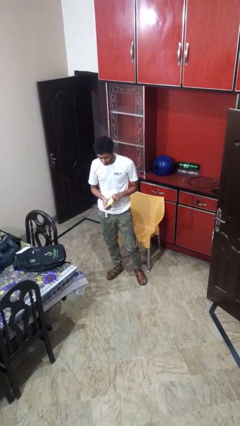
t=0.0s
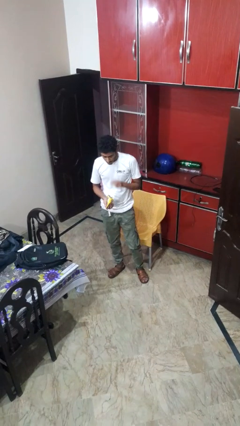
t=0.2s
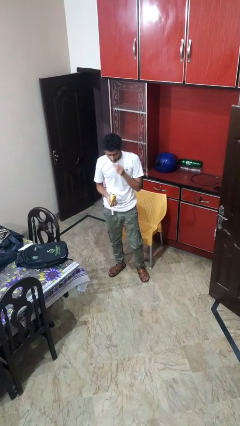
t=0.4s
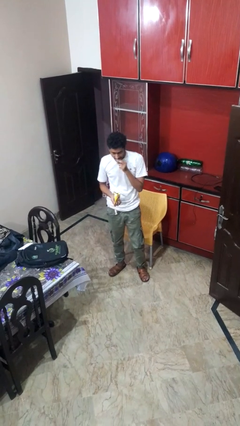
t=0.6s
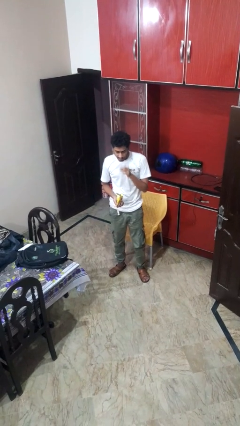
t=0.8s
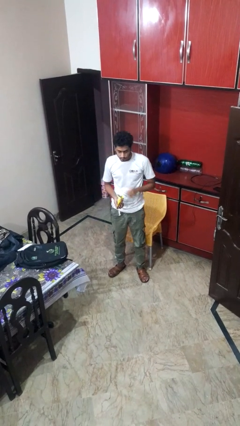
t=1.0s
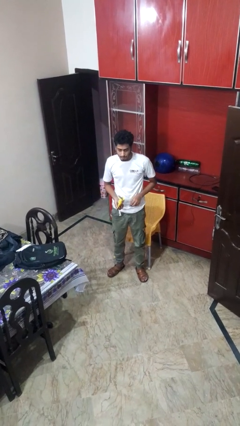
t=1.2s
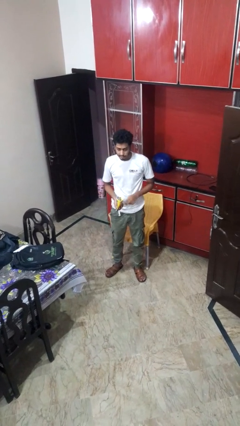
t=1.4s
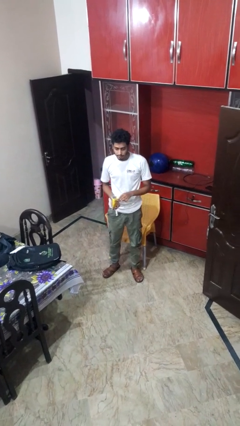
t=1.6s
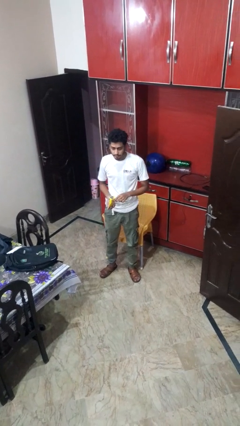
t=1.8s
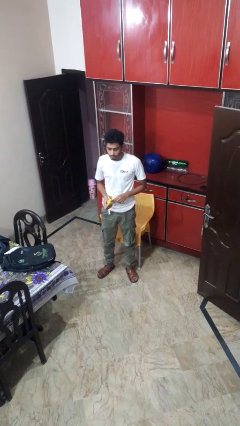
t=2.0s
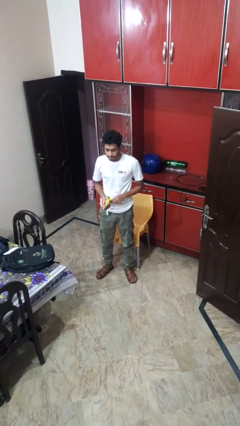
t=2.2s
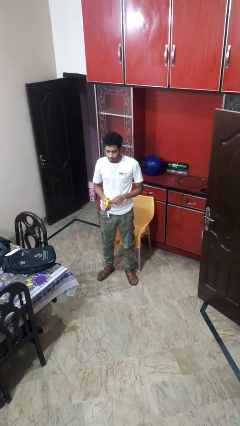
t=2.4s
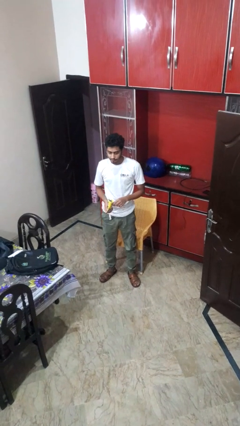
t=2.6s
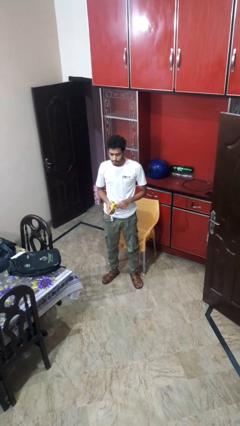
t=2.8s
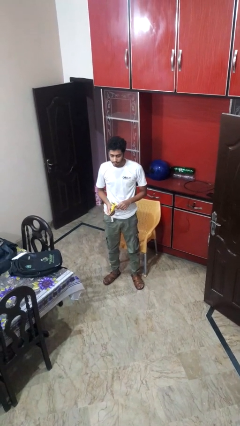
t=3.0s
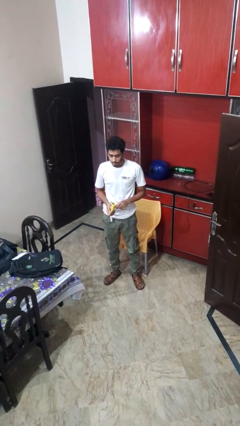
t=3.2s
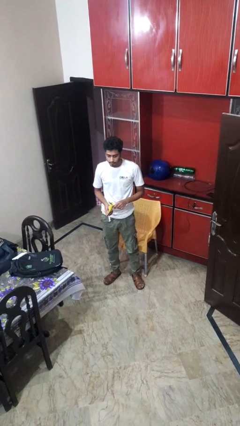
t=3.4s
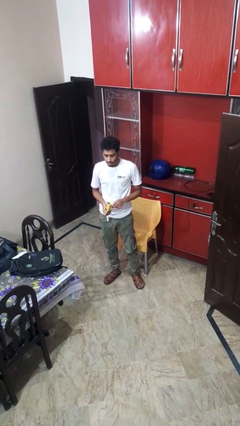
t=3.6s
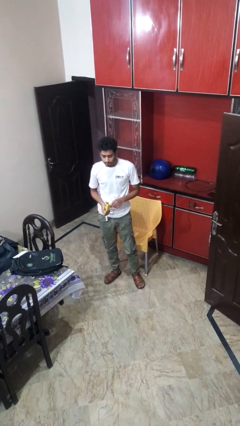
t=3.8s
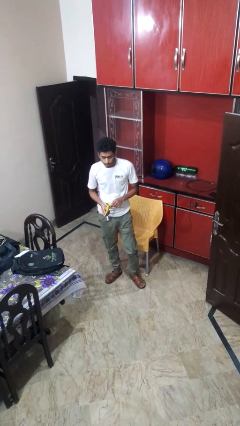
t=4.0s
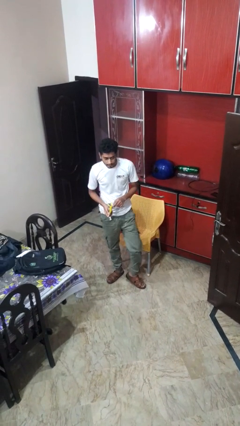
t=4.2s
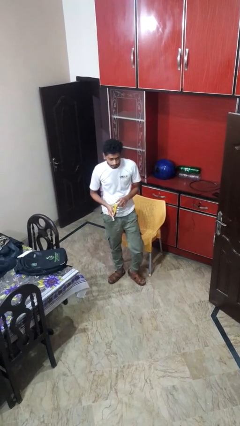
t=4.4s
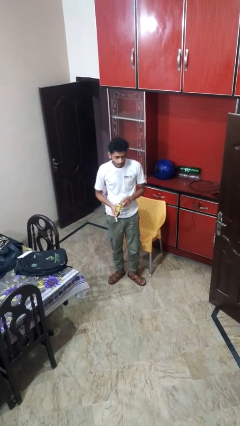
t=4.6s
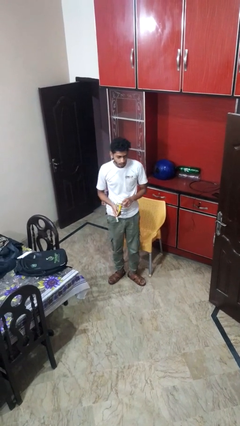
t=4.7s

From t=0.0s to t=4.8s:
person eats snack from bag

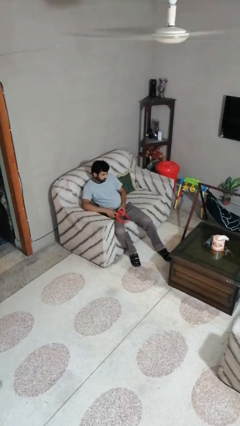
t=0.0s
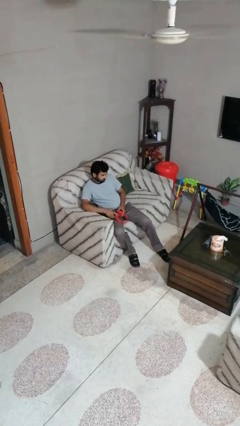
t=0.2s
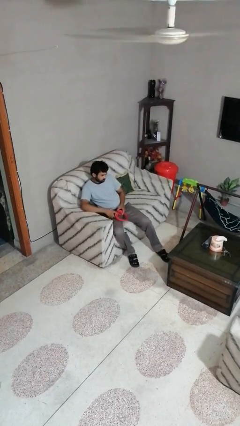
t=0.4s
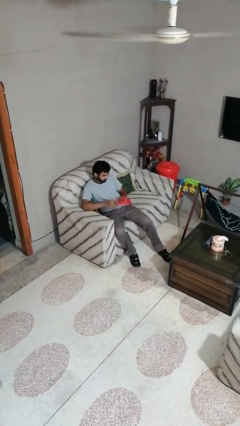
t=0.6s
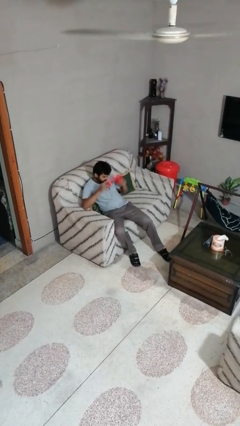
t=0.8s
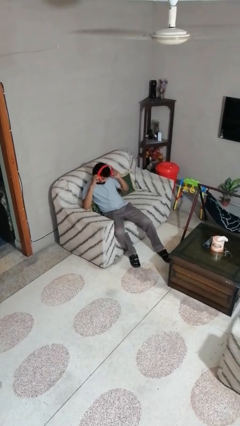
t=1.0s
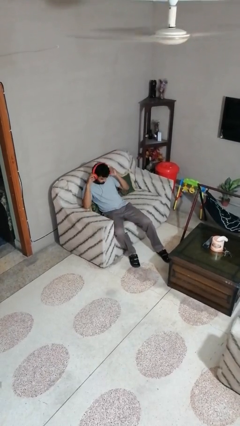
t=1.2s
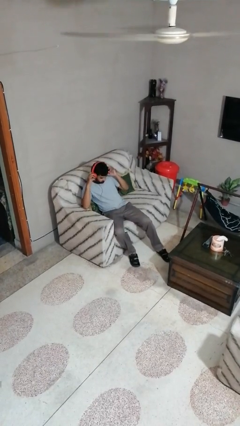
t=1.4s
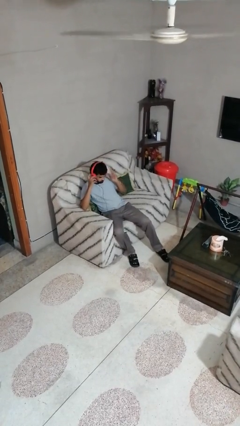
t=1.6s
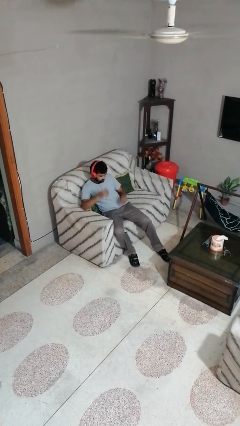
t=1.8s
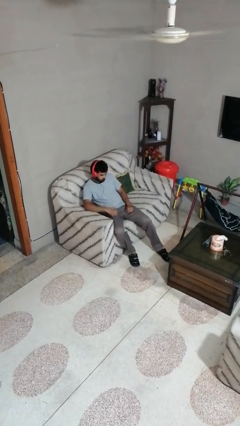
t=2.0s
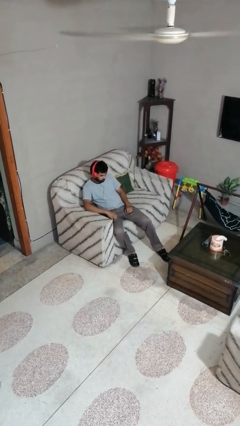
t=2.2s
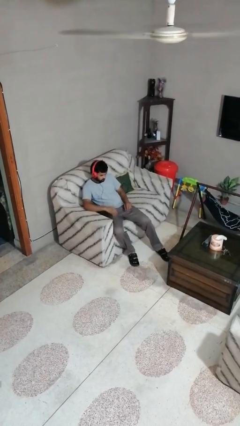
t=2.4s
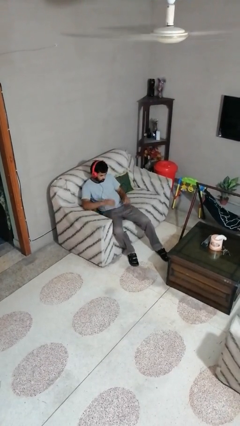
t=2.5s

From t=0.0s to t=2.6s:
person puts on headphones

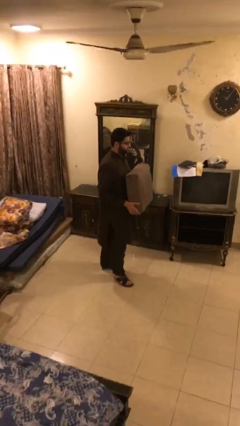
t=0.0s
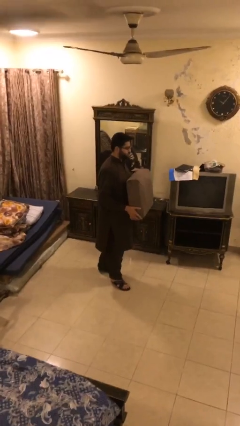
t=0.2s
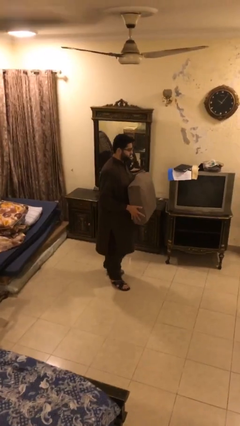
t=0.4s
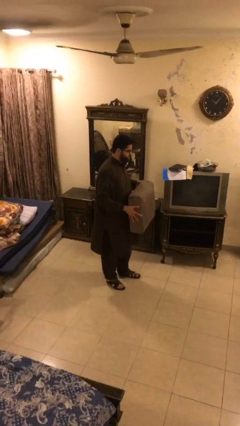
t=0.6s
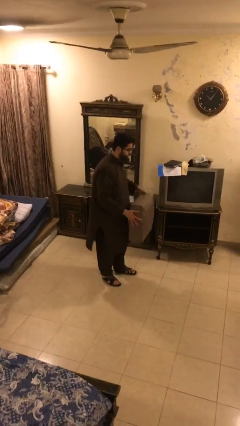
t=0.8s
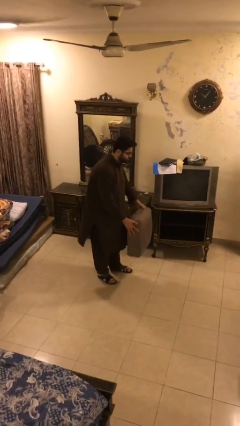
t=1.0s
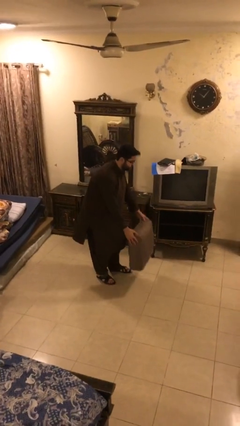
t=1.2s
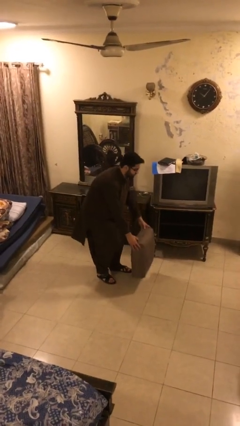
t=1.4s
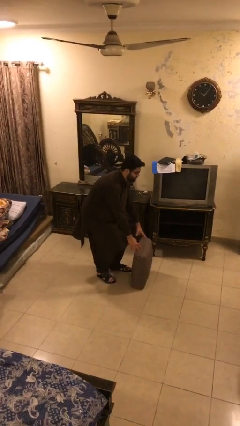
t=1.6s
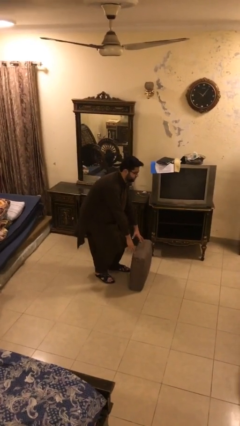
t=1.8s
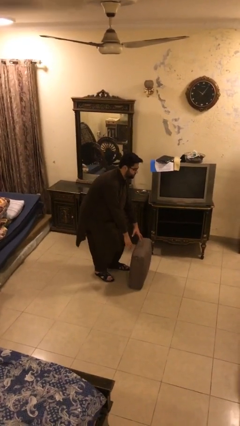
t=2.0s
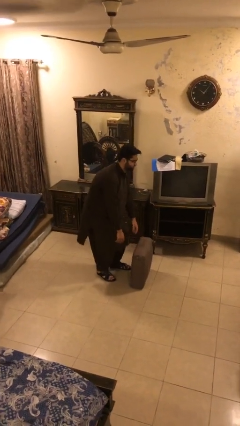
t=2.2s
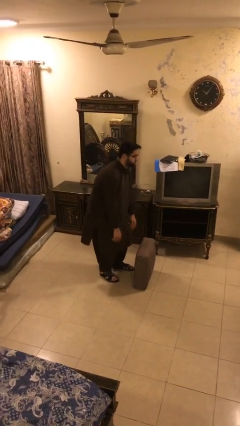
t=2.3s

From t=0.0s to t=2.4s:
person puts down object on floor

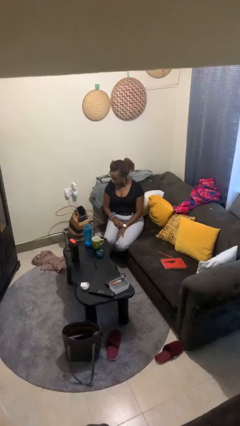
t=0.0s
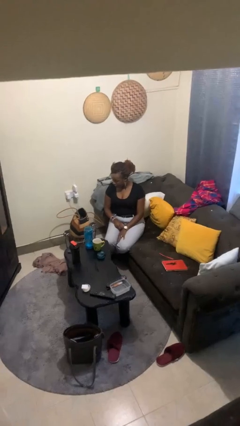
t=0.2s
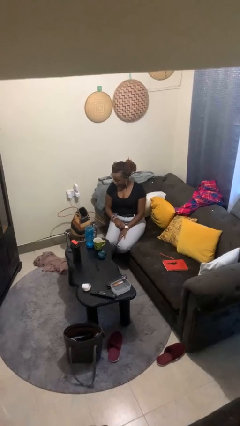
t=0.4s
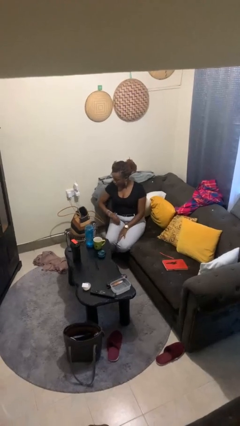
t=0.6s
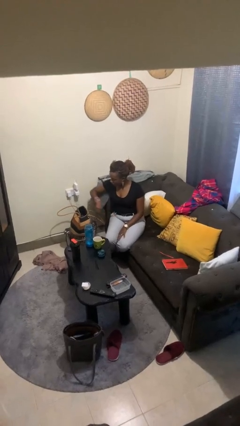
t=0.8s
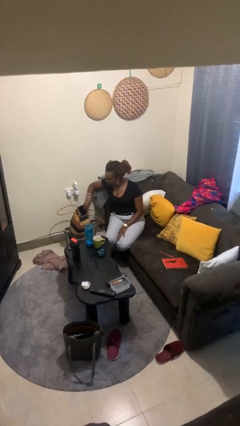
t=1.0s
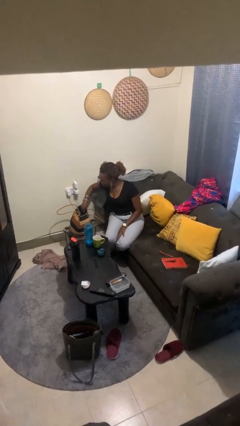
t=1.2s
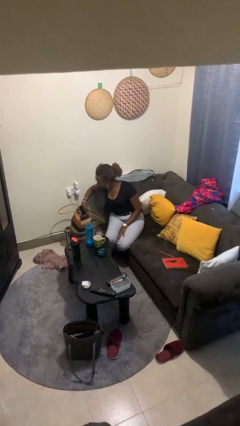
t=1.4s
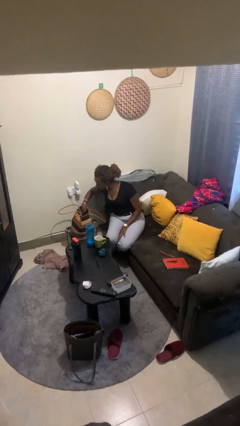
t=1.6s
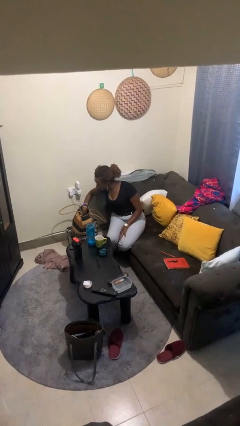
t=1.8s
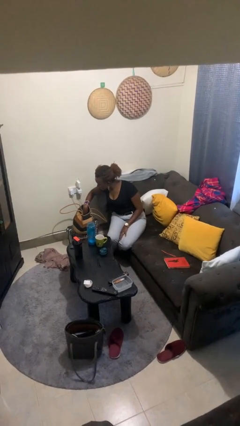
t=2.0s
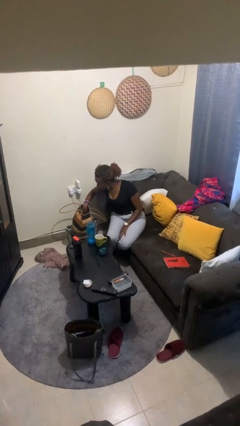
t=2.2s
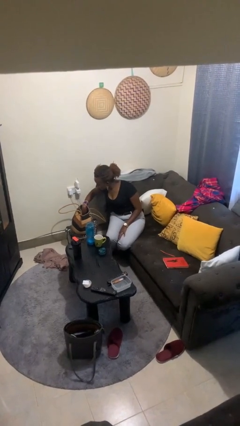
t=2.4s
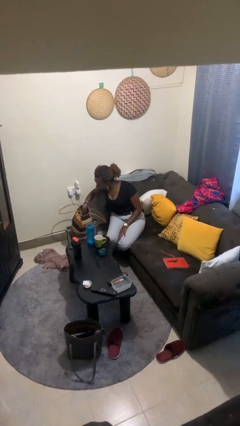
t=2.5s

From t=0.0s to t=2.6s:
person searches in purse

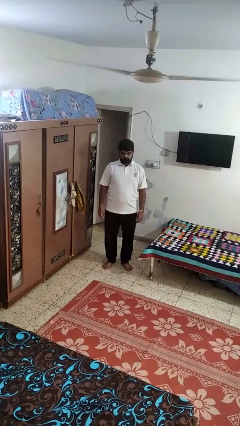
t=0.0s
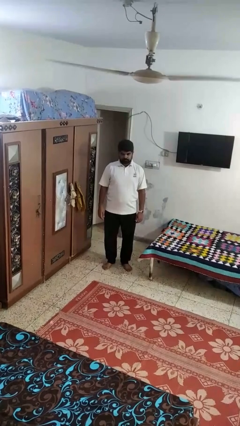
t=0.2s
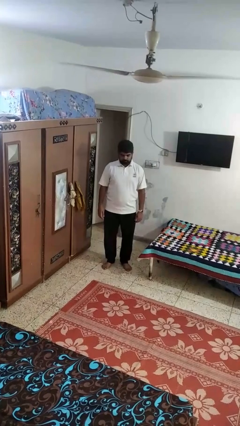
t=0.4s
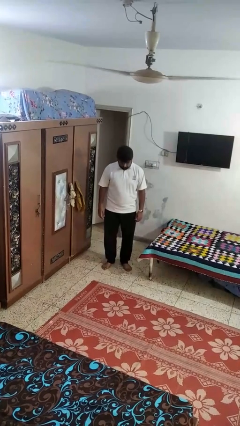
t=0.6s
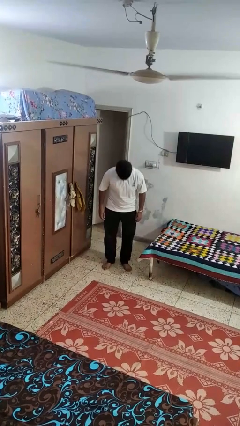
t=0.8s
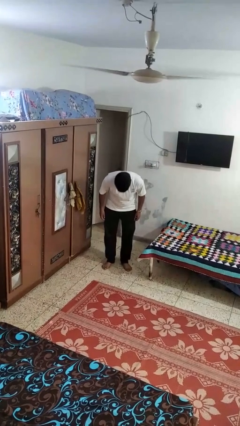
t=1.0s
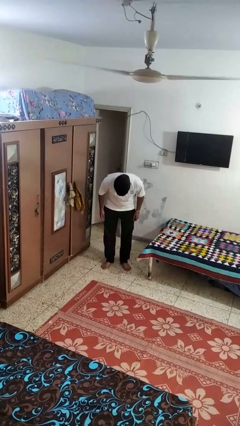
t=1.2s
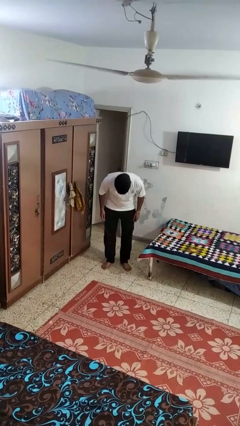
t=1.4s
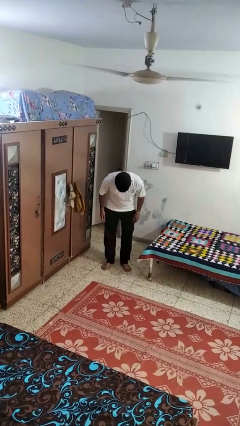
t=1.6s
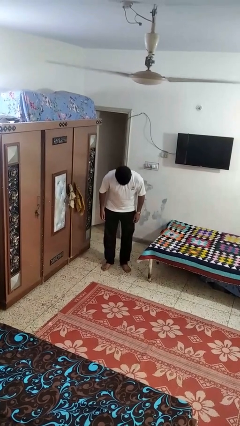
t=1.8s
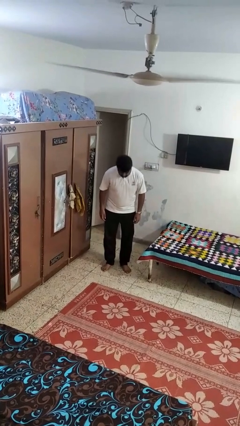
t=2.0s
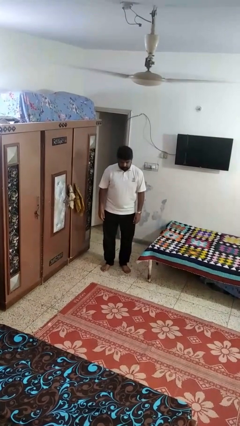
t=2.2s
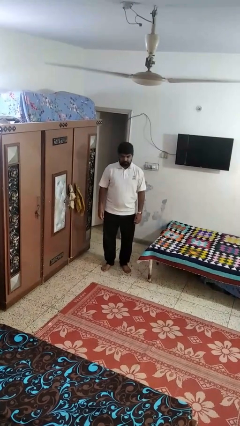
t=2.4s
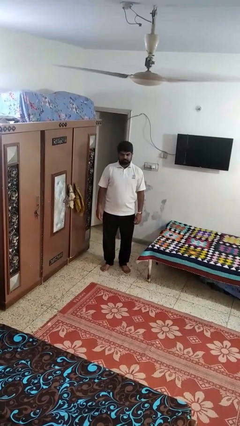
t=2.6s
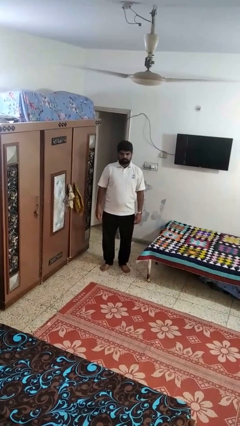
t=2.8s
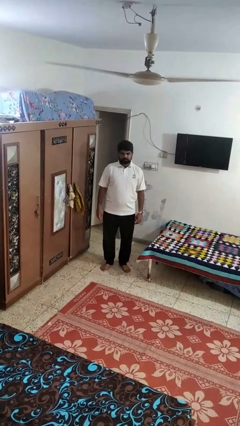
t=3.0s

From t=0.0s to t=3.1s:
person bows

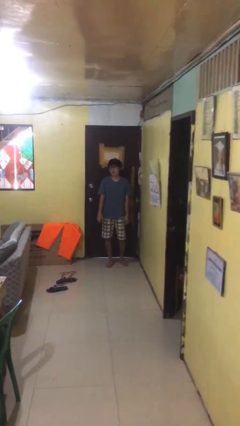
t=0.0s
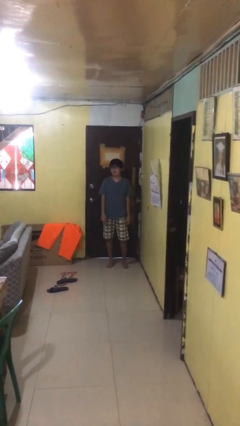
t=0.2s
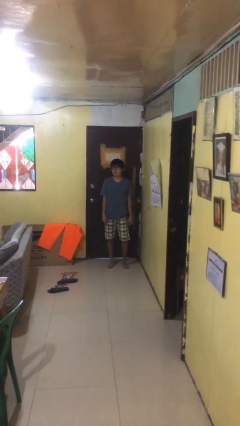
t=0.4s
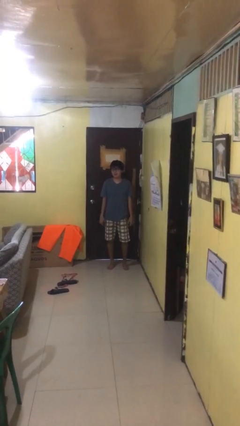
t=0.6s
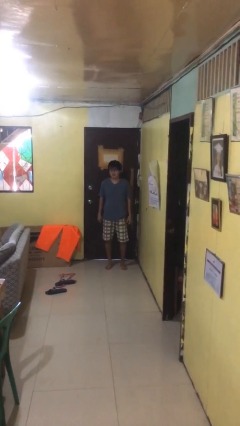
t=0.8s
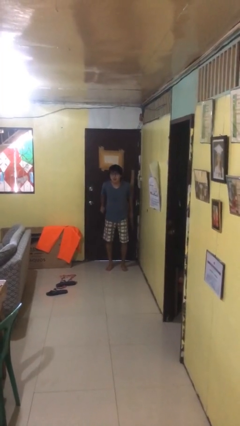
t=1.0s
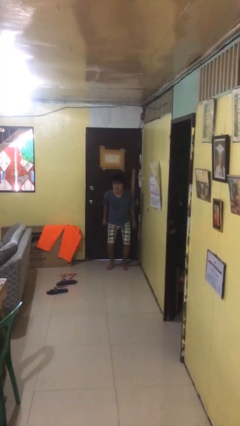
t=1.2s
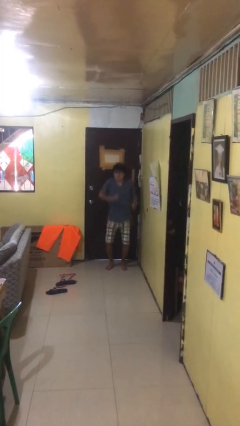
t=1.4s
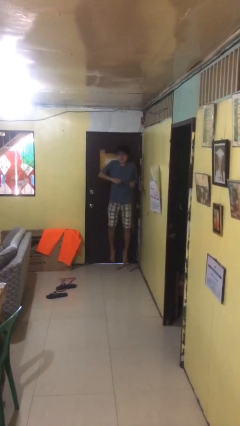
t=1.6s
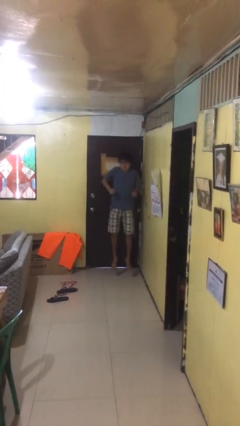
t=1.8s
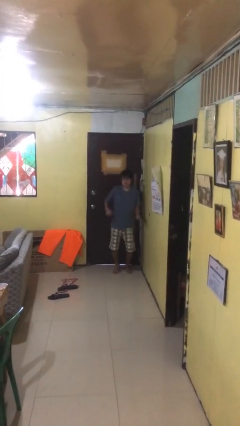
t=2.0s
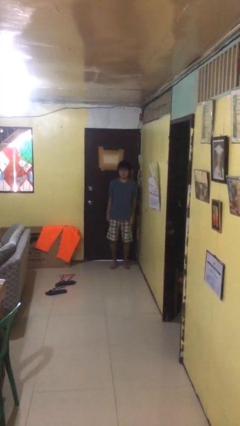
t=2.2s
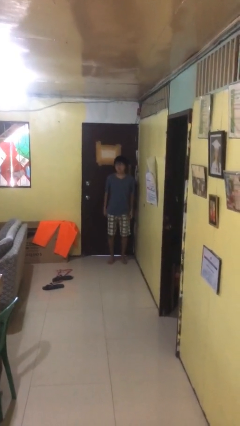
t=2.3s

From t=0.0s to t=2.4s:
person jumps
